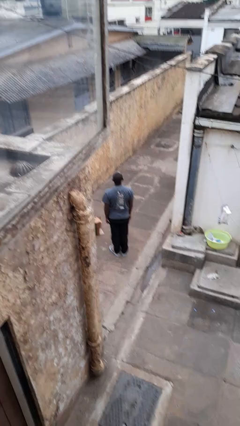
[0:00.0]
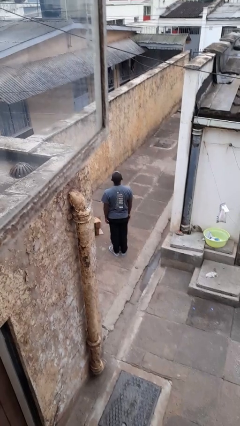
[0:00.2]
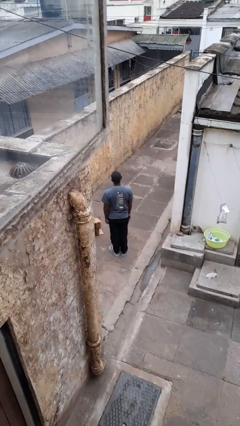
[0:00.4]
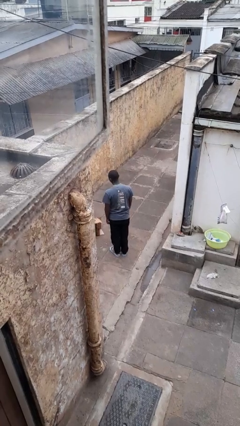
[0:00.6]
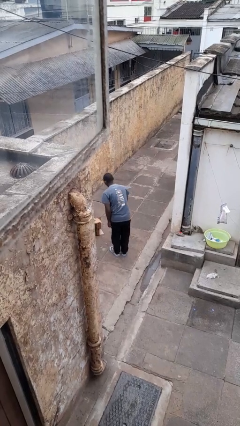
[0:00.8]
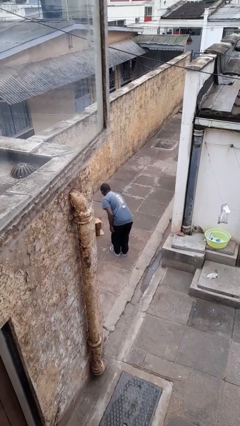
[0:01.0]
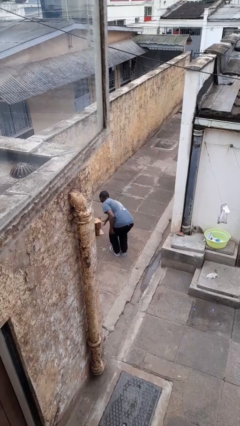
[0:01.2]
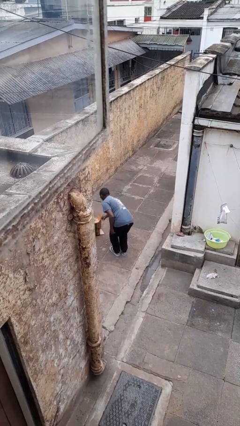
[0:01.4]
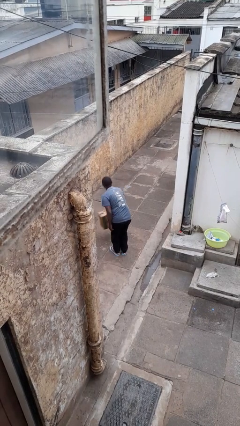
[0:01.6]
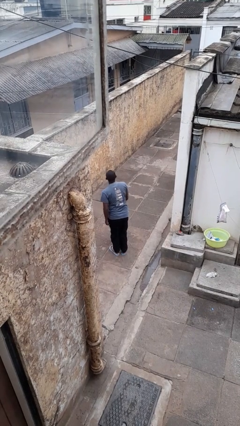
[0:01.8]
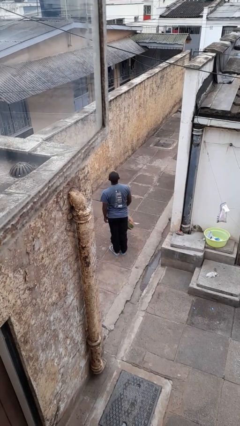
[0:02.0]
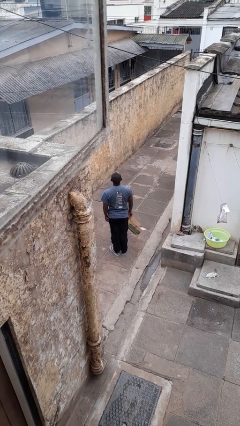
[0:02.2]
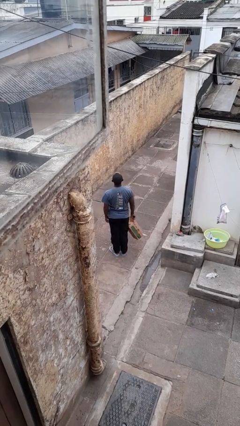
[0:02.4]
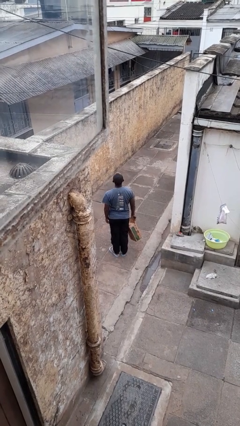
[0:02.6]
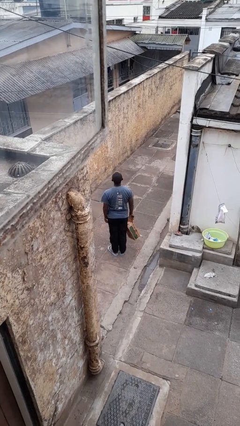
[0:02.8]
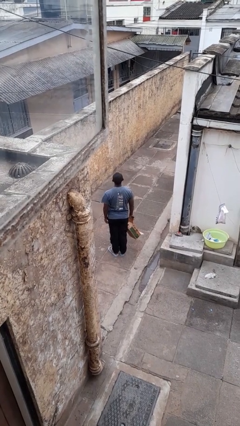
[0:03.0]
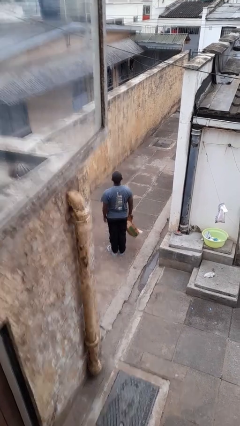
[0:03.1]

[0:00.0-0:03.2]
person picks up object from floor

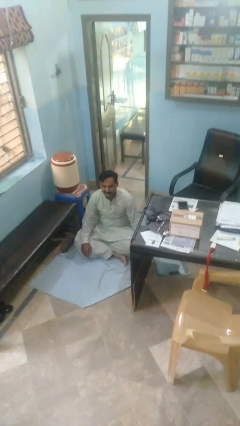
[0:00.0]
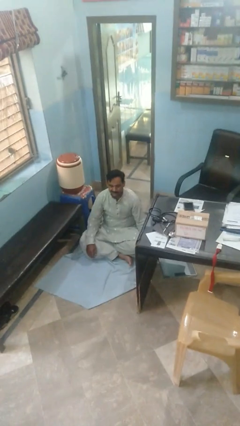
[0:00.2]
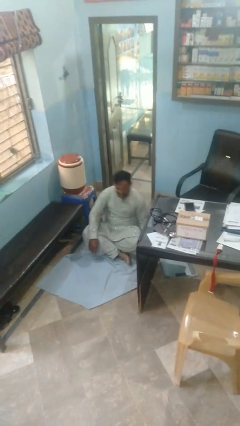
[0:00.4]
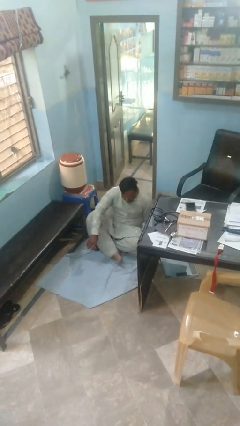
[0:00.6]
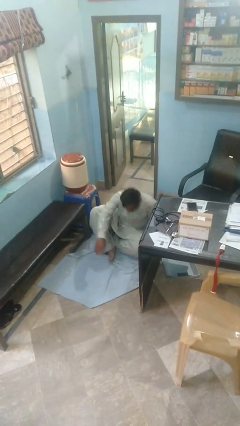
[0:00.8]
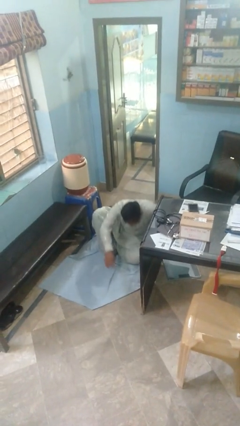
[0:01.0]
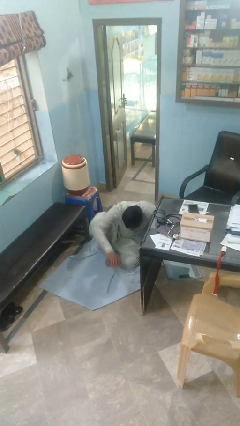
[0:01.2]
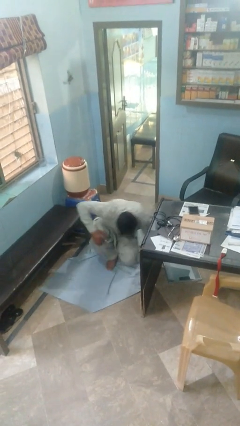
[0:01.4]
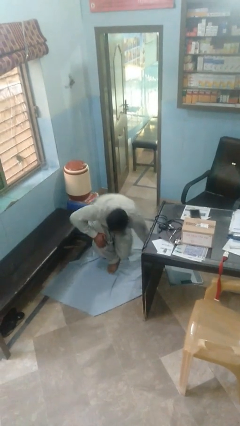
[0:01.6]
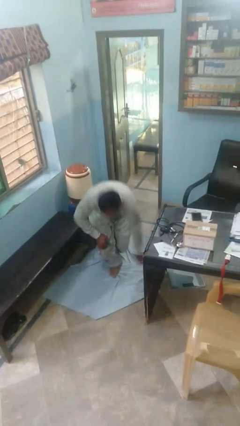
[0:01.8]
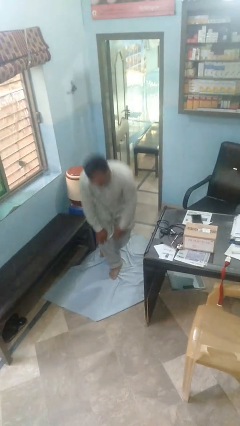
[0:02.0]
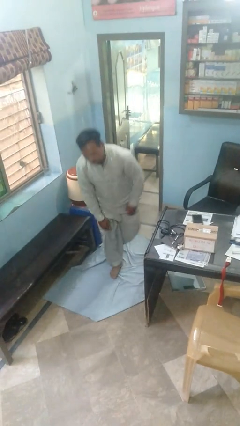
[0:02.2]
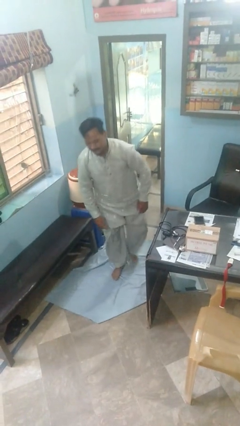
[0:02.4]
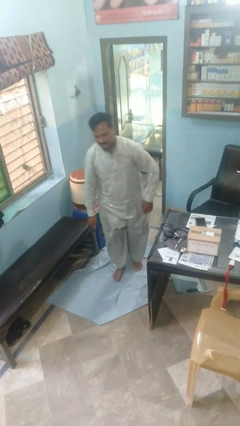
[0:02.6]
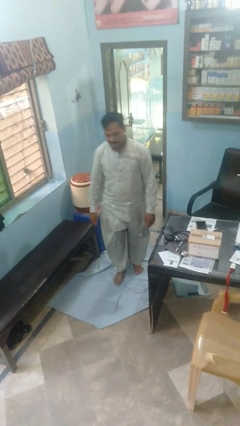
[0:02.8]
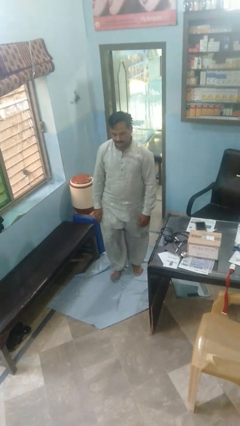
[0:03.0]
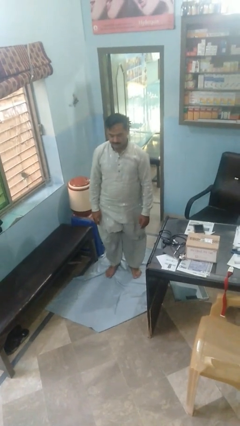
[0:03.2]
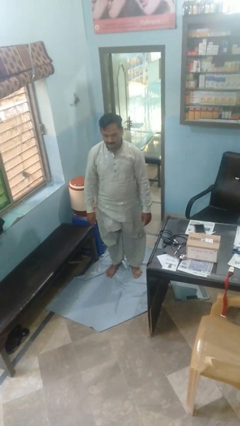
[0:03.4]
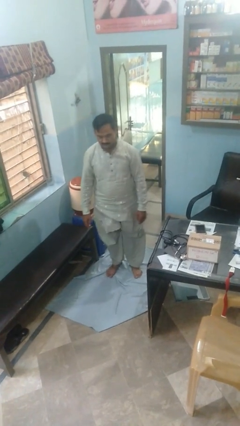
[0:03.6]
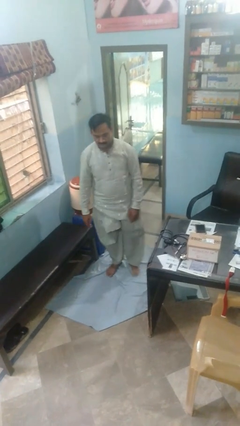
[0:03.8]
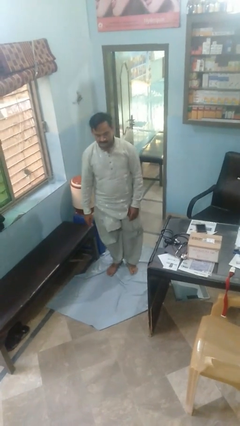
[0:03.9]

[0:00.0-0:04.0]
person stands up from floor

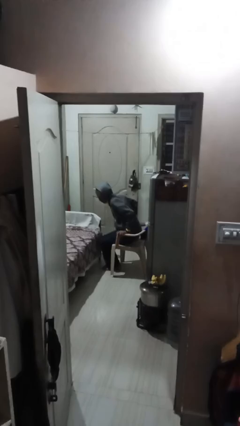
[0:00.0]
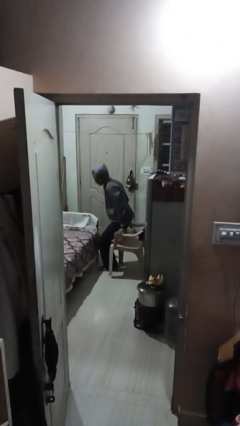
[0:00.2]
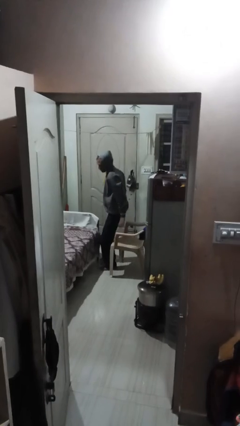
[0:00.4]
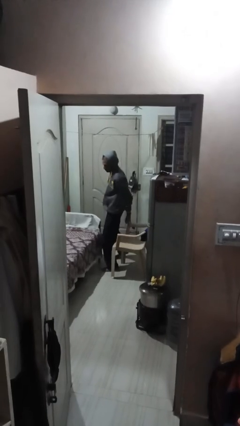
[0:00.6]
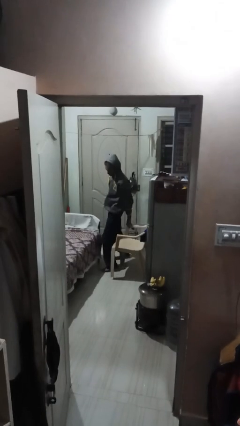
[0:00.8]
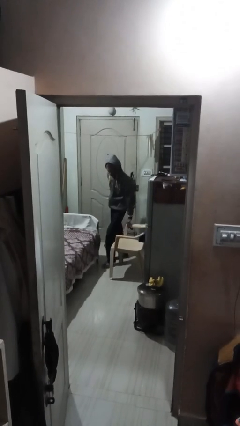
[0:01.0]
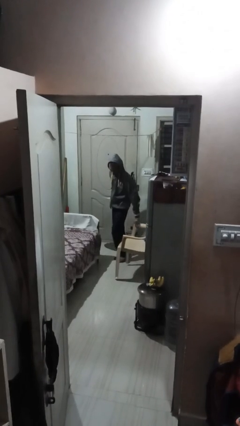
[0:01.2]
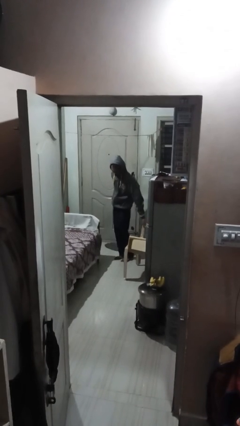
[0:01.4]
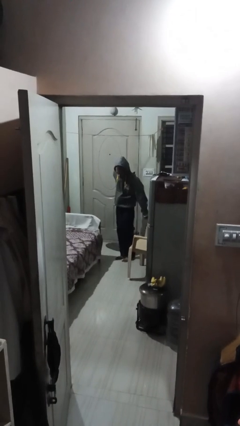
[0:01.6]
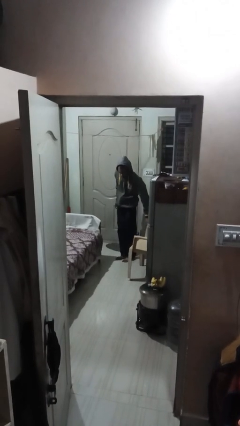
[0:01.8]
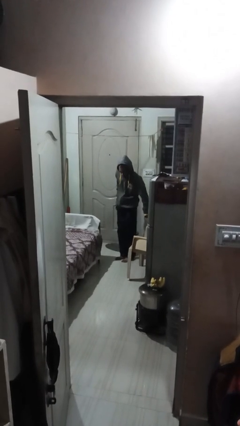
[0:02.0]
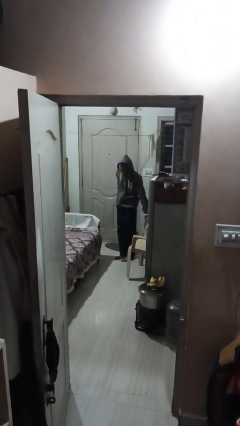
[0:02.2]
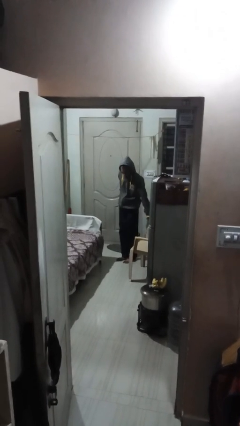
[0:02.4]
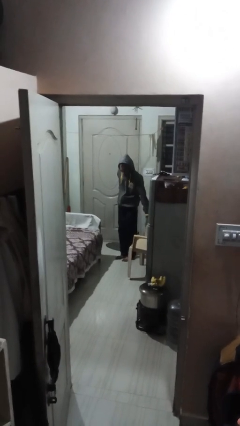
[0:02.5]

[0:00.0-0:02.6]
person stands up

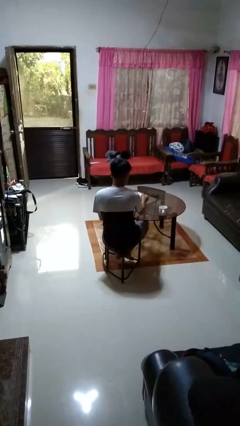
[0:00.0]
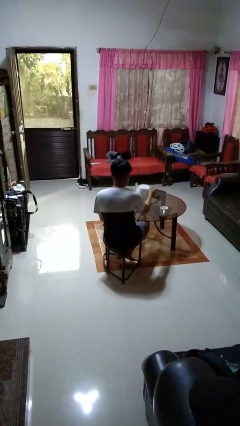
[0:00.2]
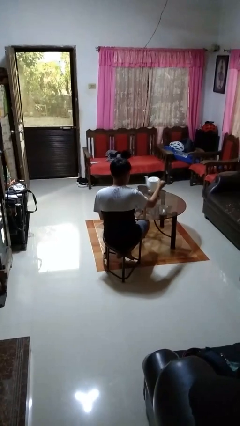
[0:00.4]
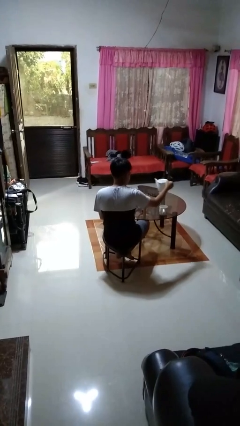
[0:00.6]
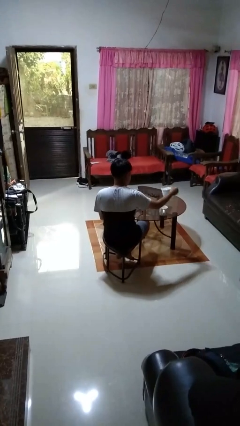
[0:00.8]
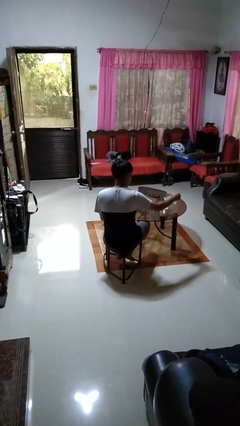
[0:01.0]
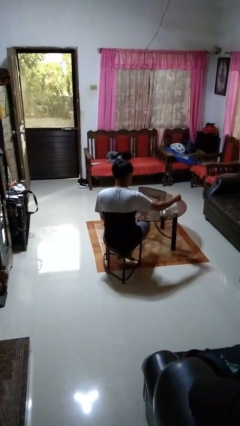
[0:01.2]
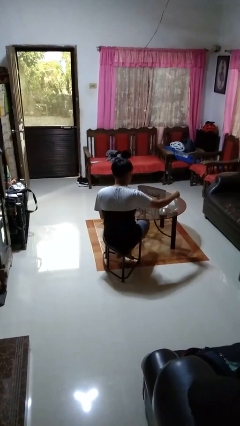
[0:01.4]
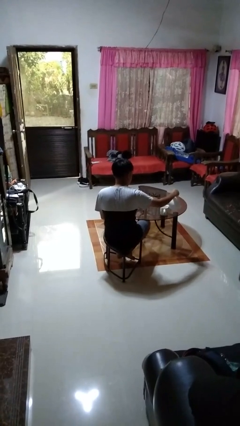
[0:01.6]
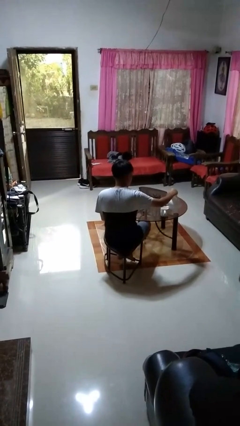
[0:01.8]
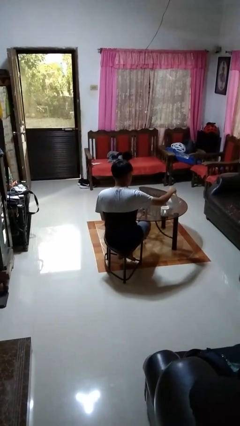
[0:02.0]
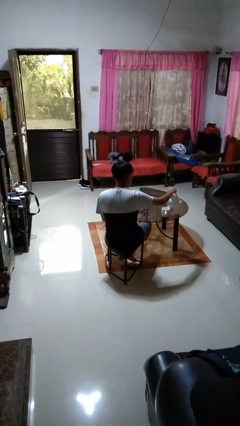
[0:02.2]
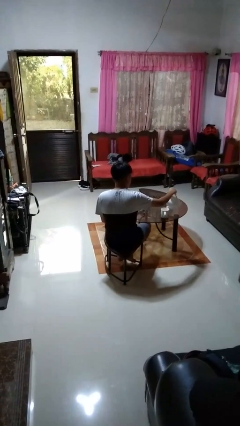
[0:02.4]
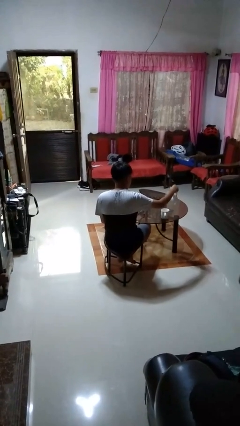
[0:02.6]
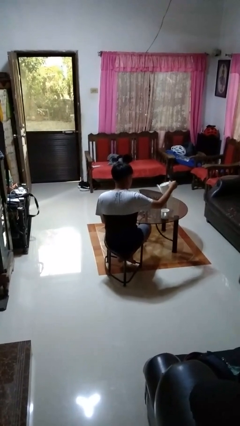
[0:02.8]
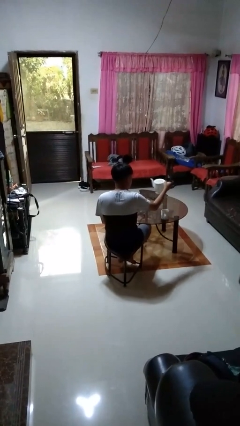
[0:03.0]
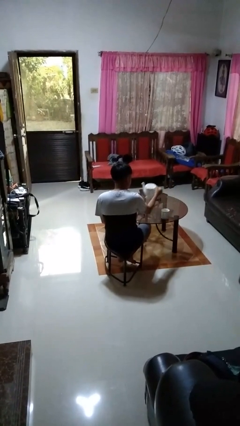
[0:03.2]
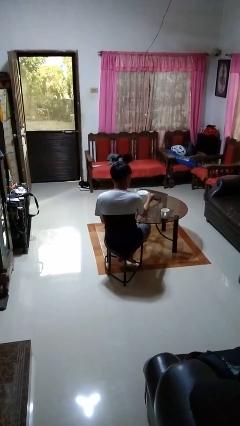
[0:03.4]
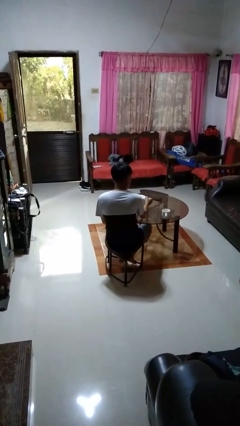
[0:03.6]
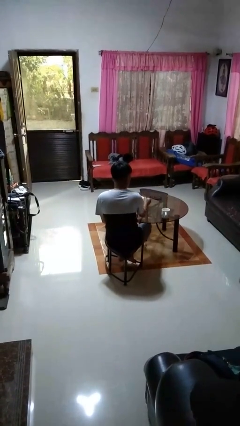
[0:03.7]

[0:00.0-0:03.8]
person pours coffee into mug

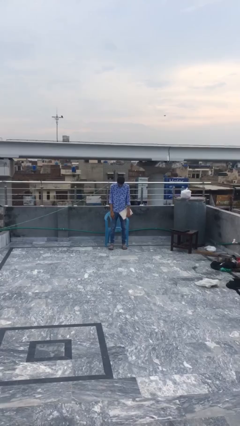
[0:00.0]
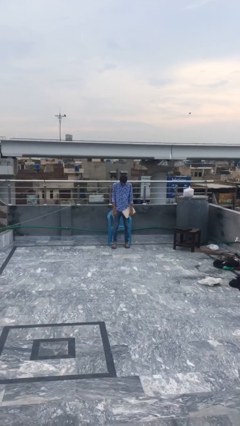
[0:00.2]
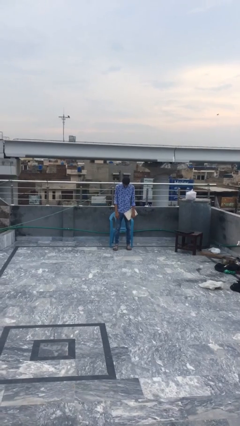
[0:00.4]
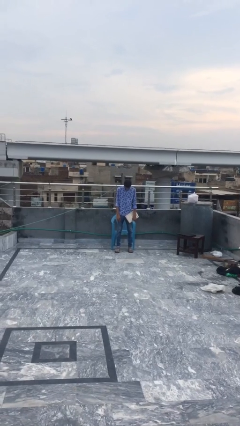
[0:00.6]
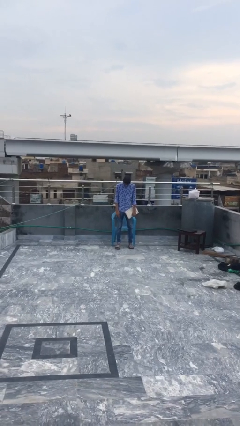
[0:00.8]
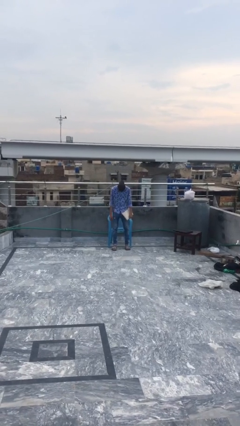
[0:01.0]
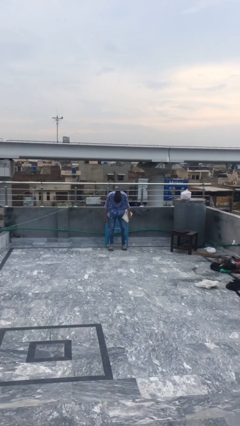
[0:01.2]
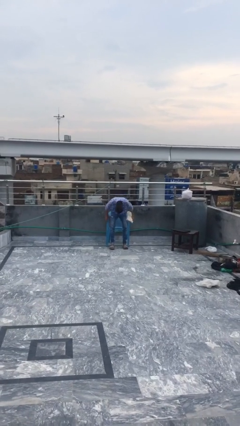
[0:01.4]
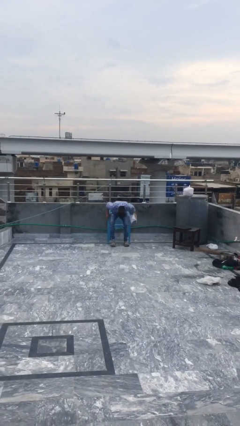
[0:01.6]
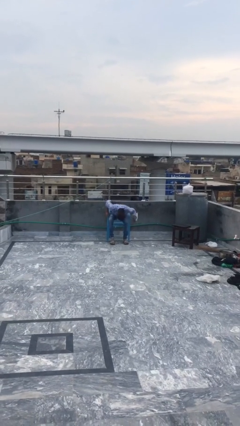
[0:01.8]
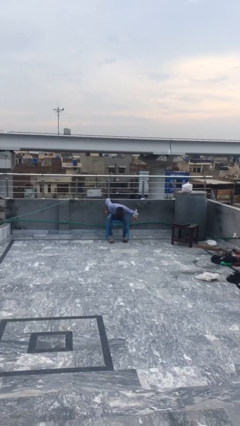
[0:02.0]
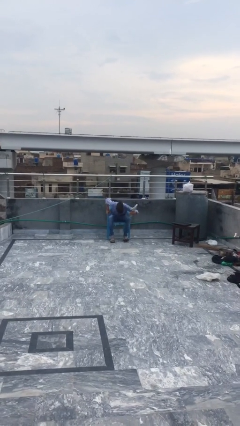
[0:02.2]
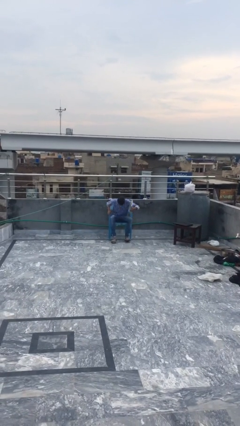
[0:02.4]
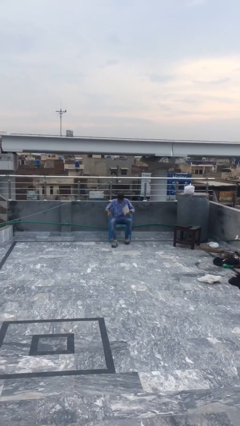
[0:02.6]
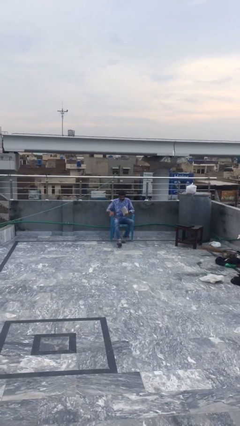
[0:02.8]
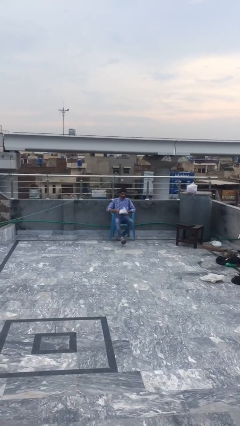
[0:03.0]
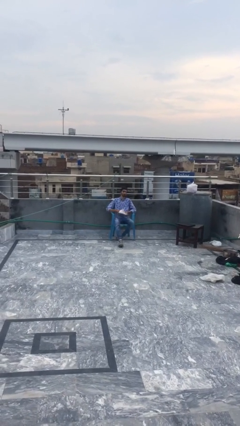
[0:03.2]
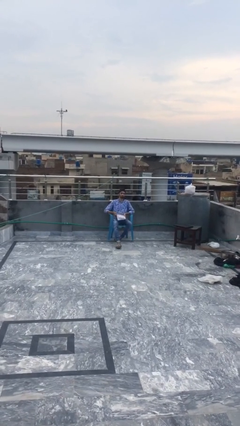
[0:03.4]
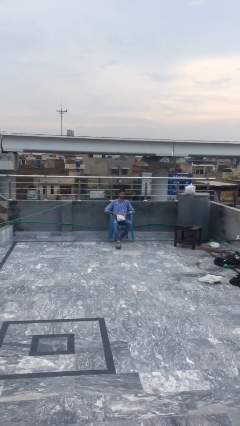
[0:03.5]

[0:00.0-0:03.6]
person sits down
